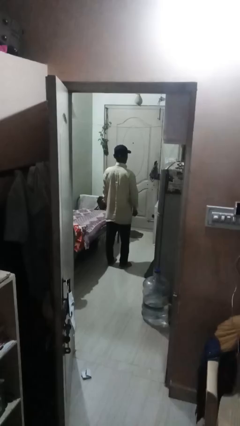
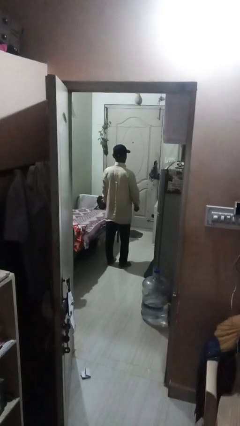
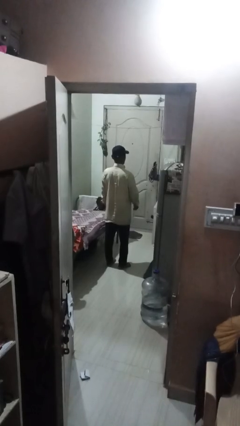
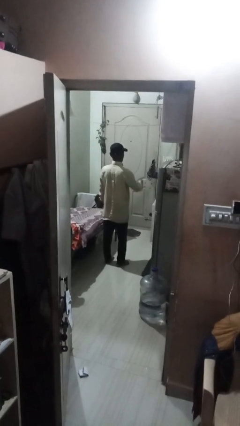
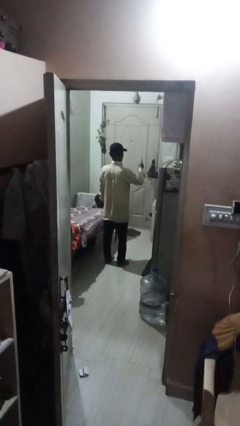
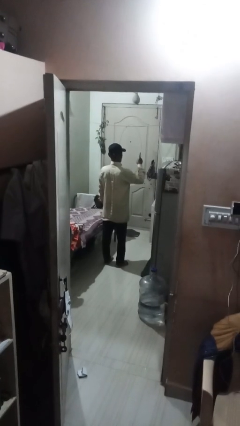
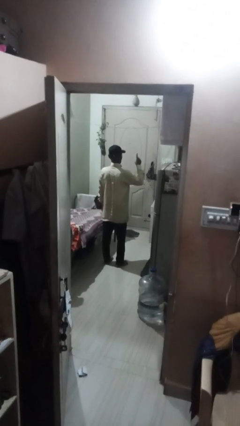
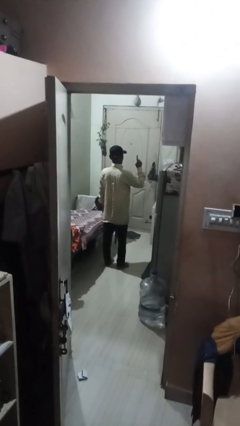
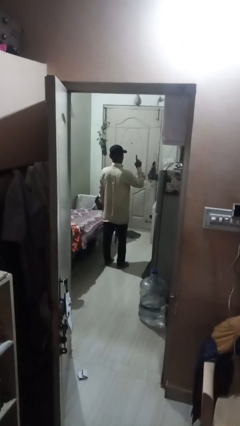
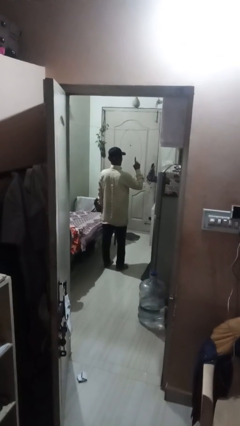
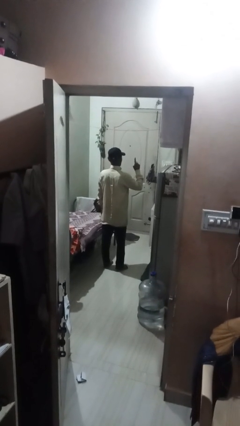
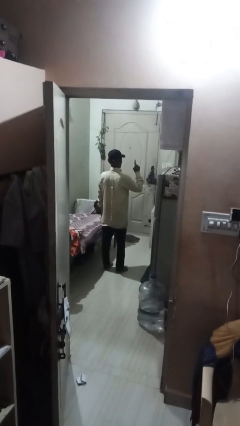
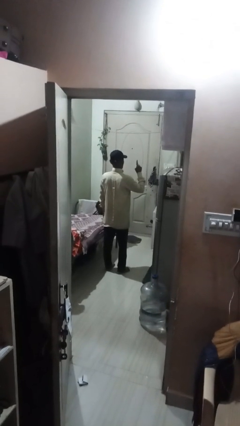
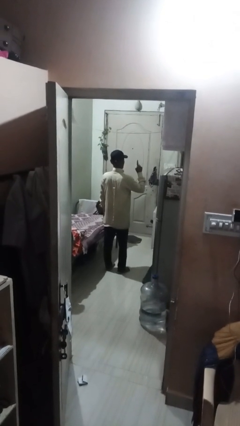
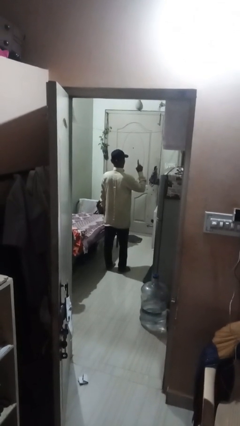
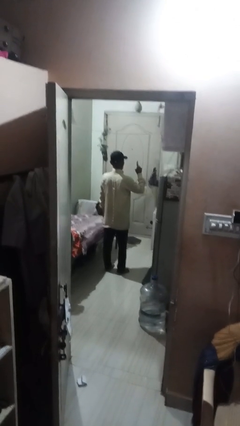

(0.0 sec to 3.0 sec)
person gestures number one

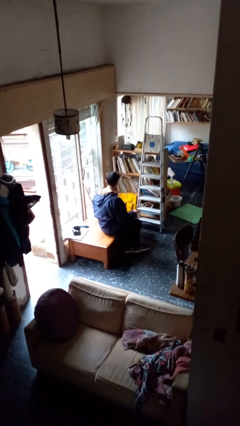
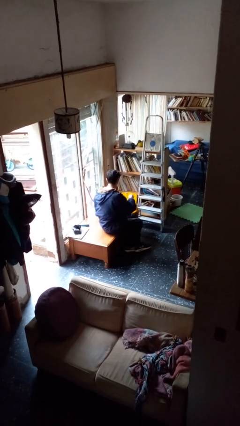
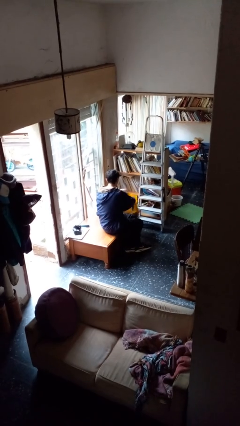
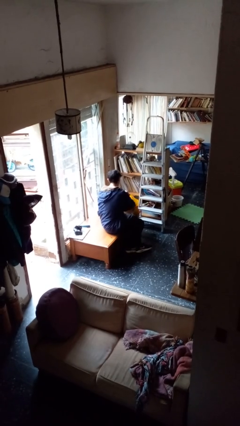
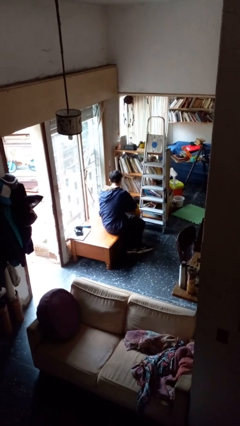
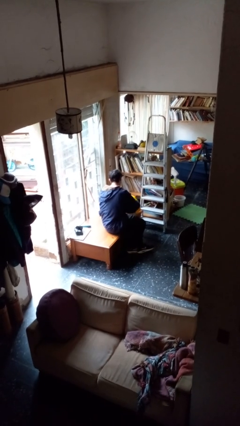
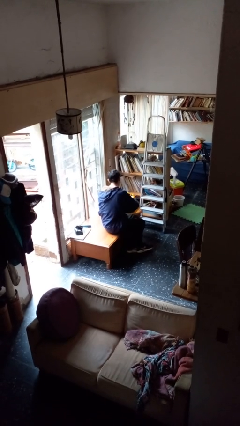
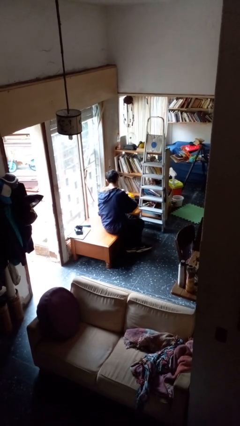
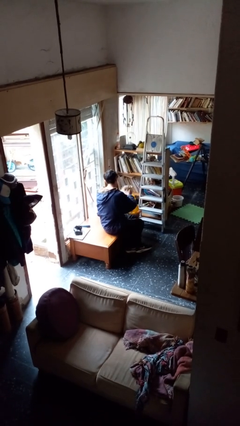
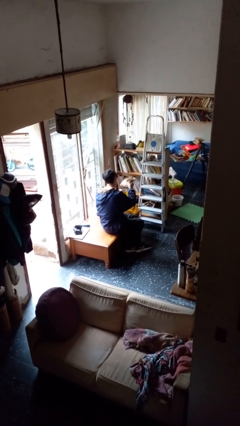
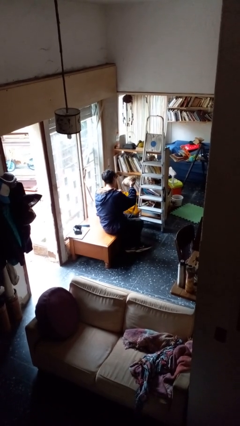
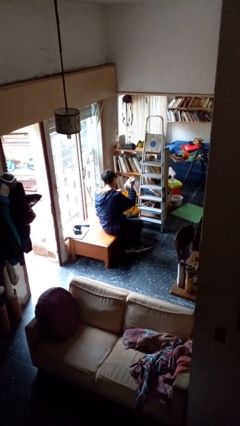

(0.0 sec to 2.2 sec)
person takes object from bag

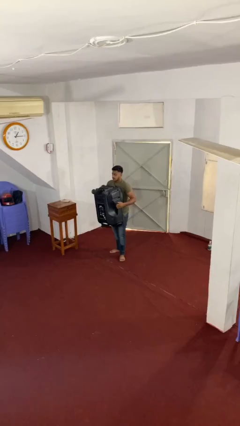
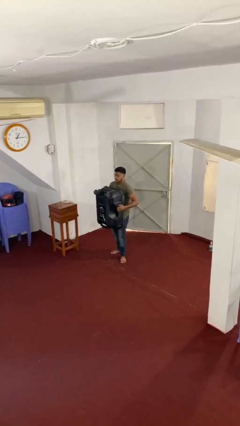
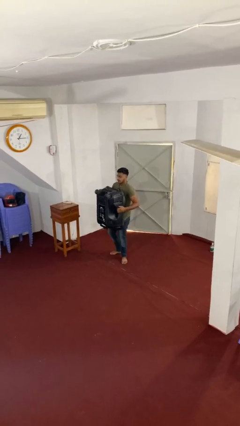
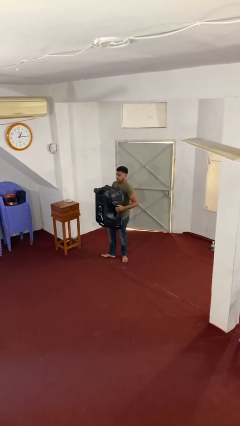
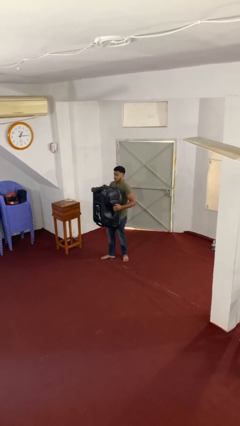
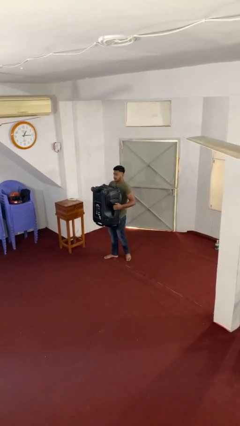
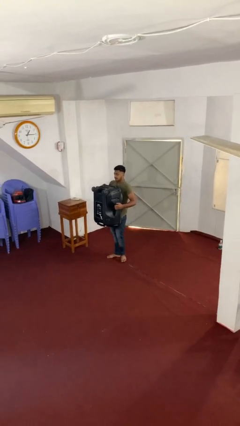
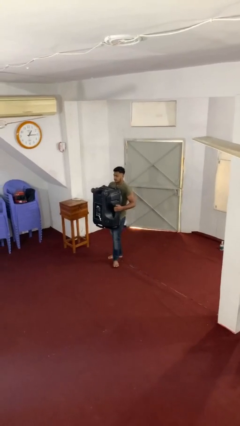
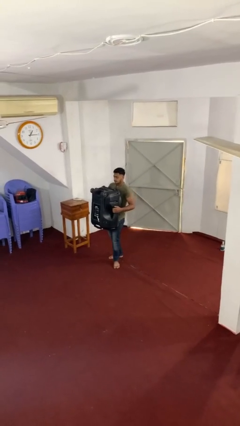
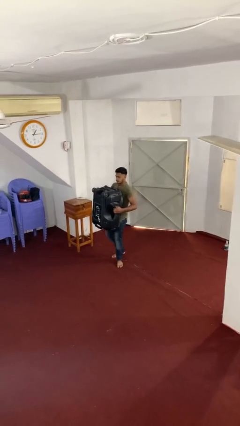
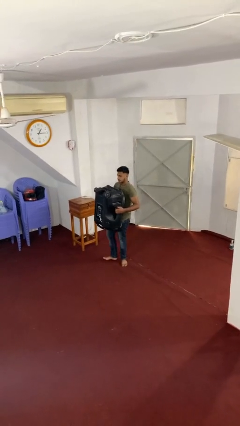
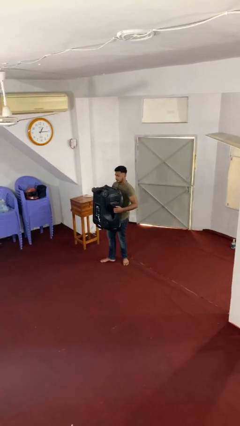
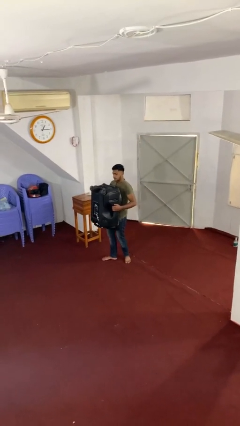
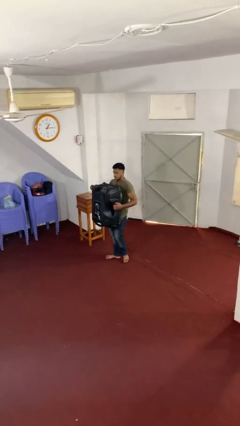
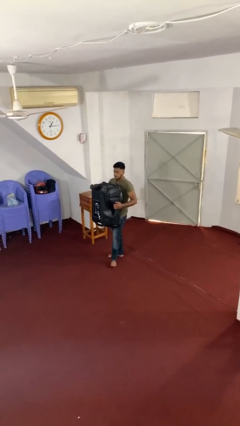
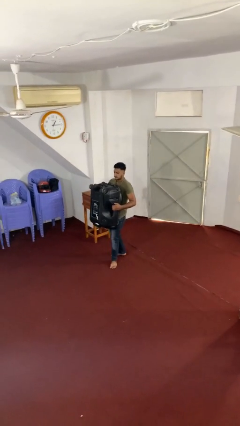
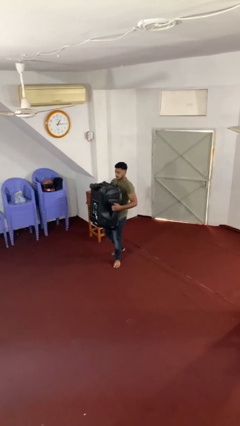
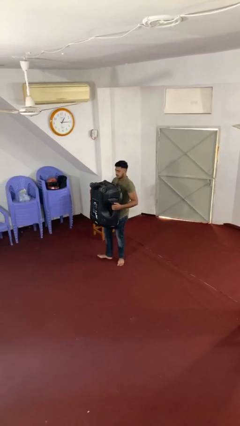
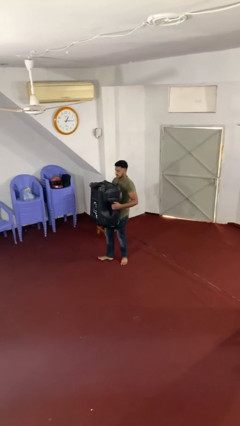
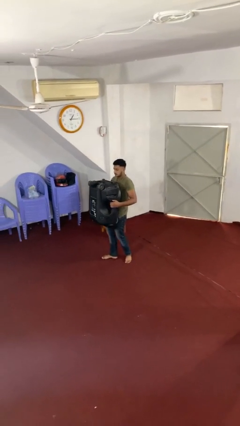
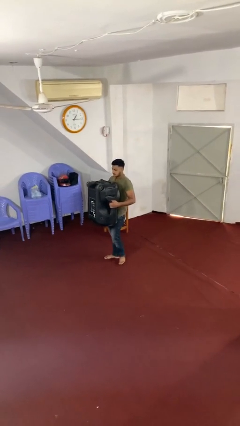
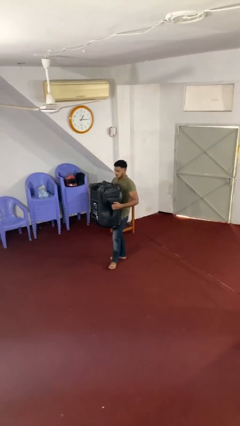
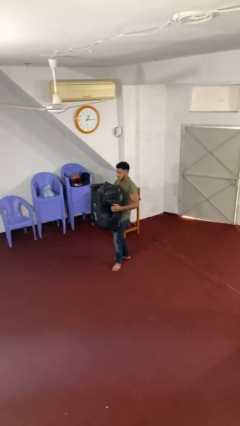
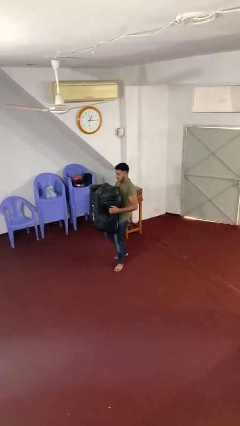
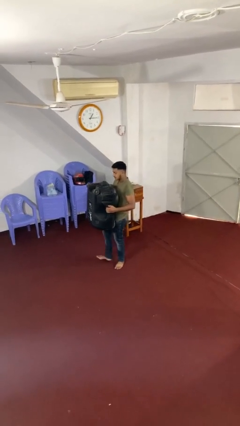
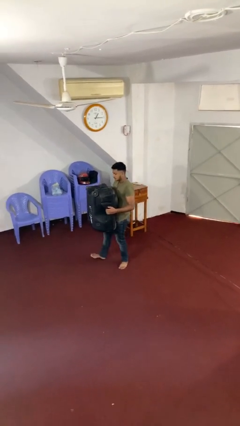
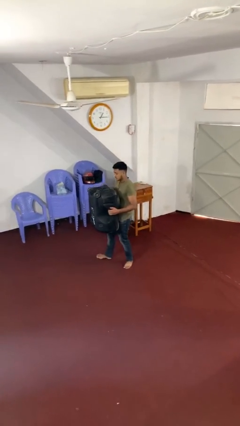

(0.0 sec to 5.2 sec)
person carries heavy object

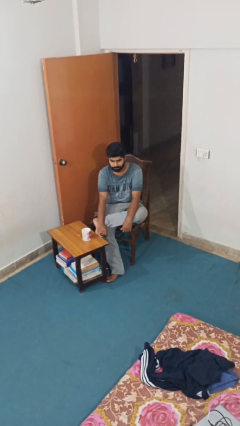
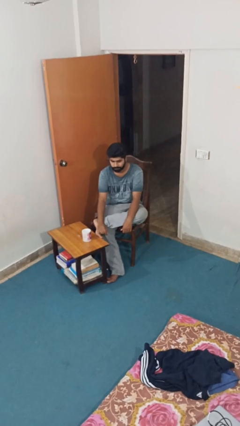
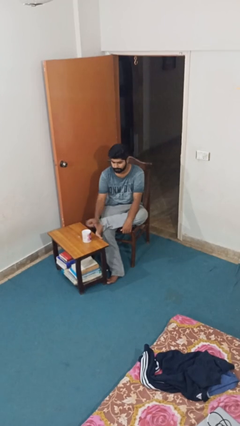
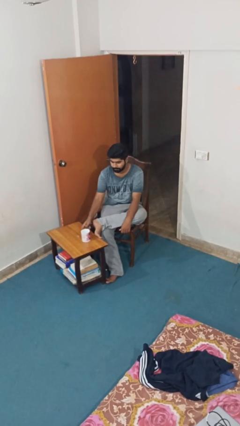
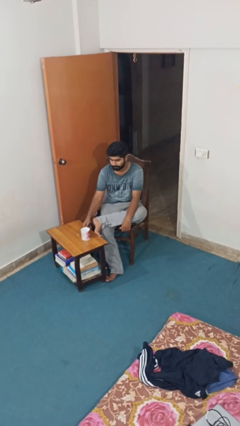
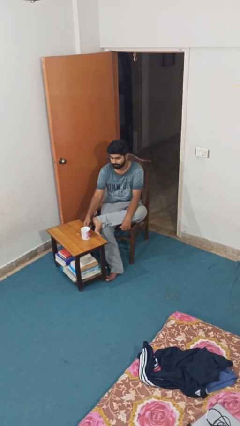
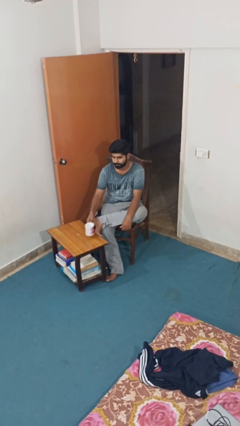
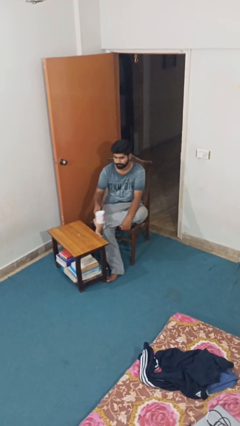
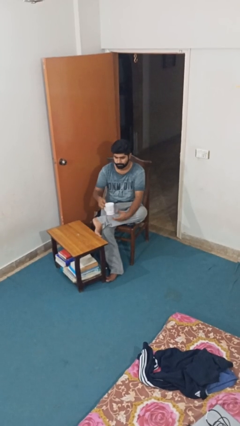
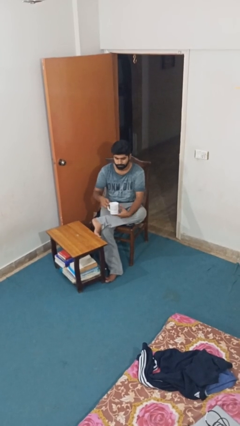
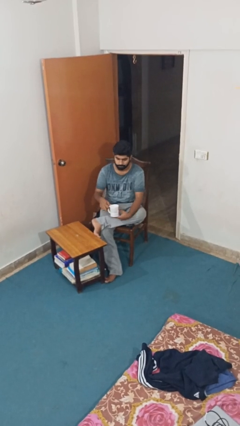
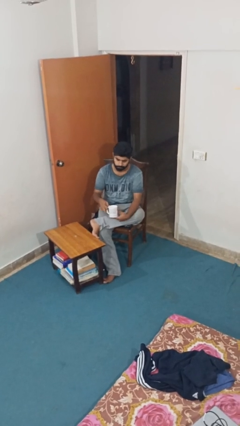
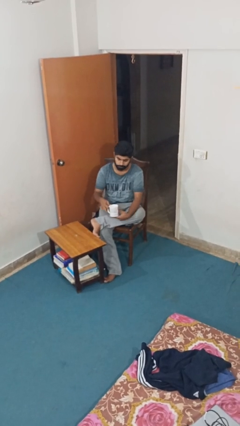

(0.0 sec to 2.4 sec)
person picks up object from table

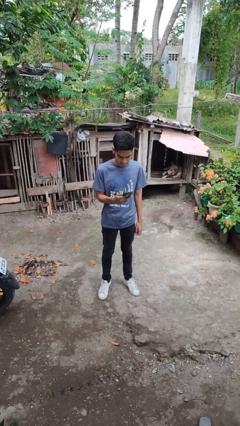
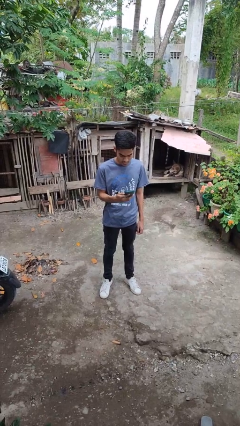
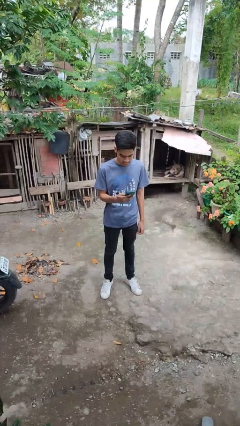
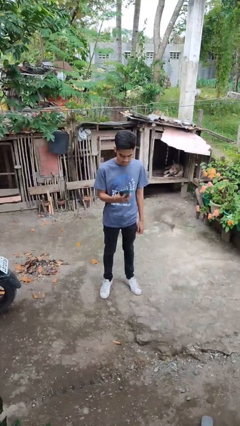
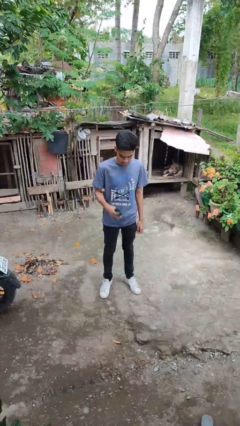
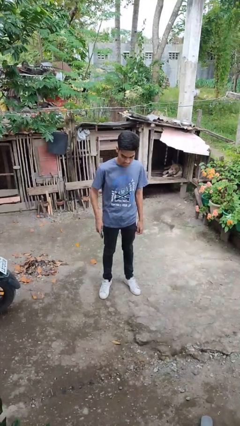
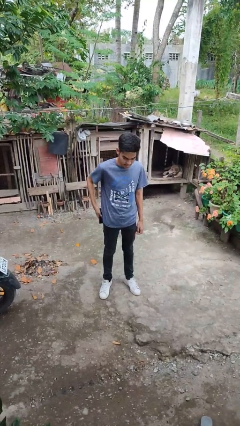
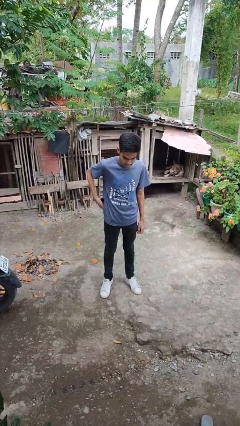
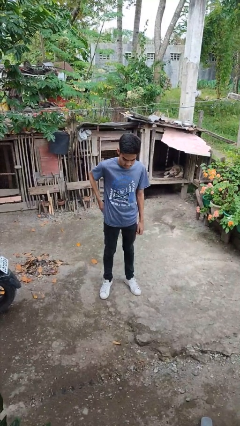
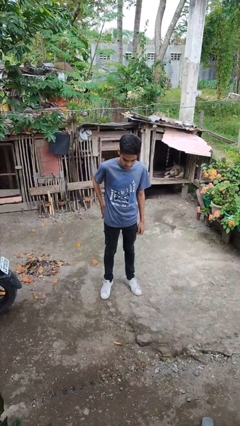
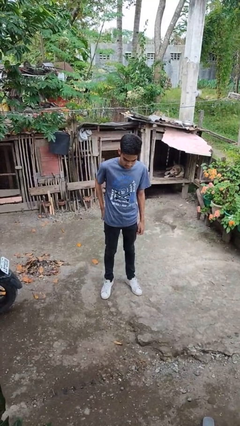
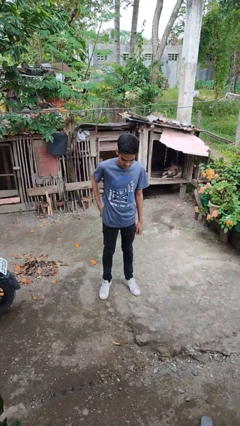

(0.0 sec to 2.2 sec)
person puts phone into pocket

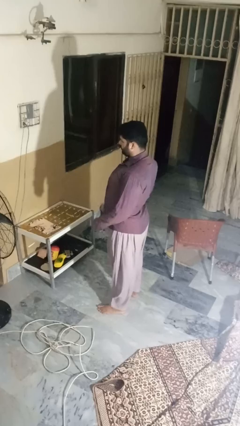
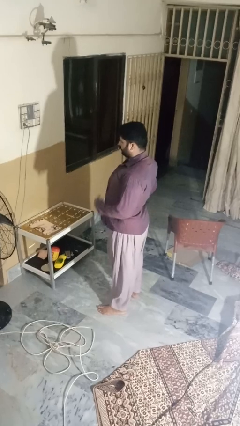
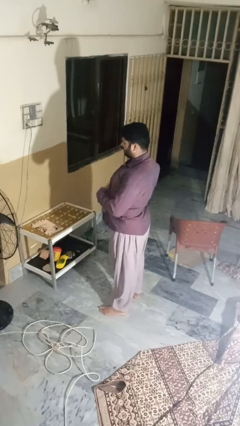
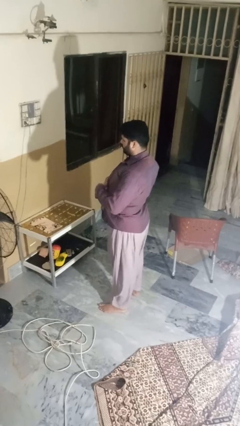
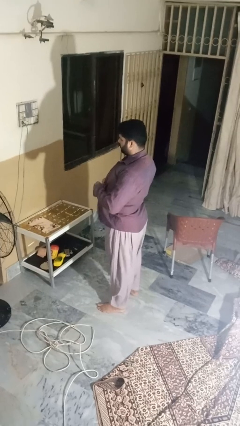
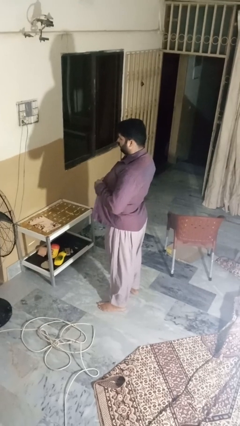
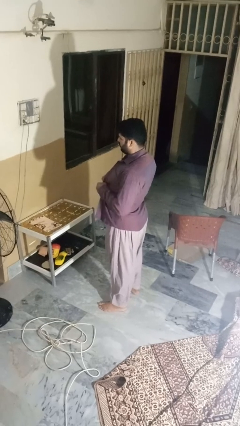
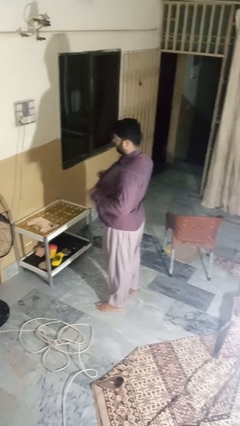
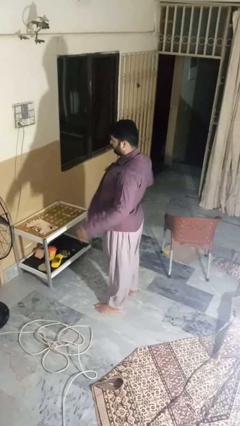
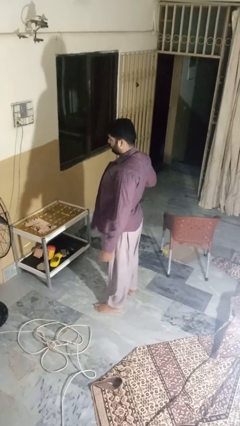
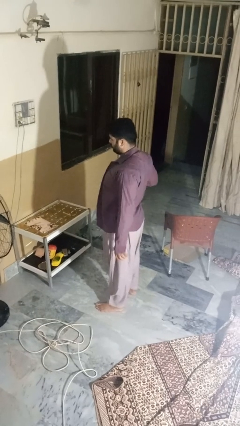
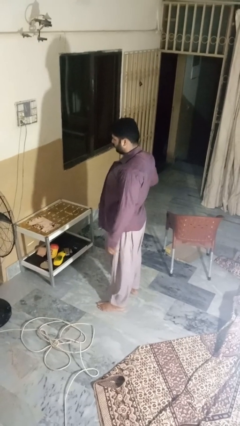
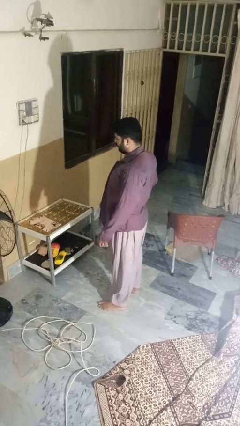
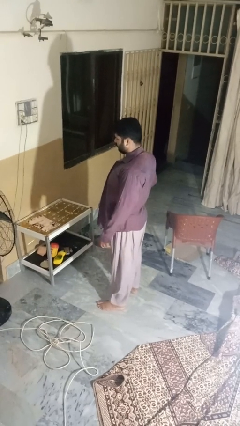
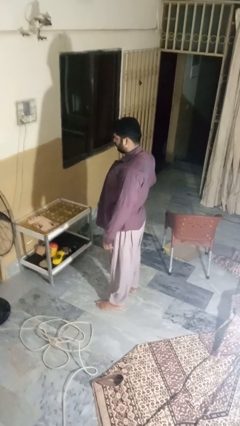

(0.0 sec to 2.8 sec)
person unbuttons shirt
